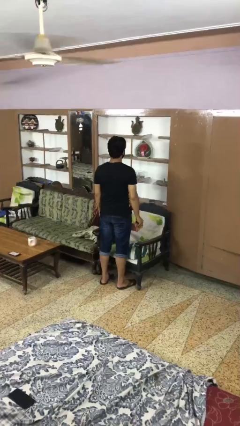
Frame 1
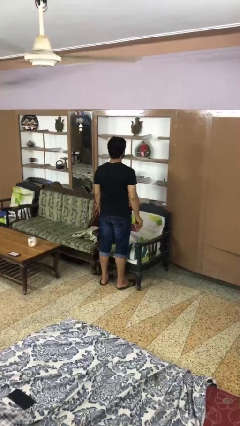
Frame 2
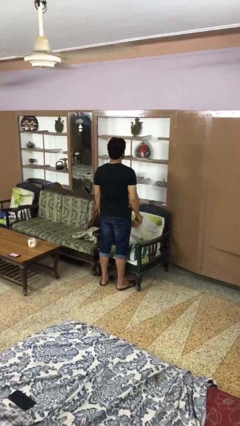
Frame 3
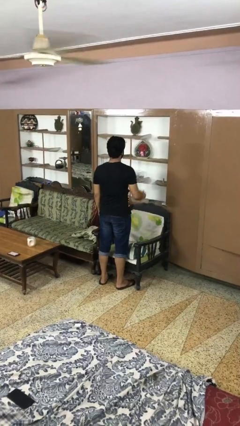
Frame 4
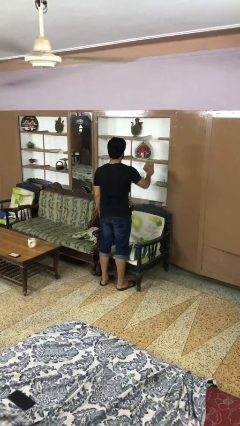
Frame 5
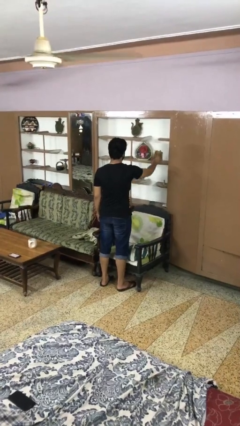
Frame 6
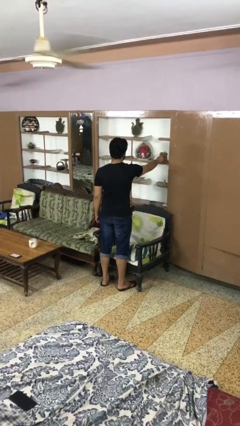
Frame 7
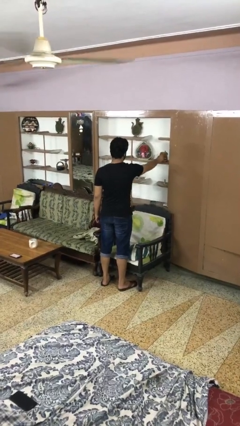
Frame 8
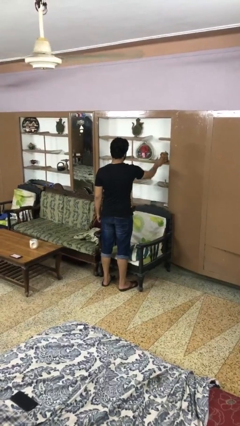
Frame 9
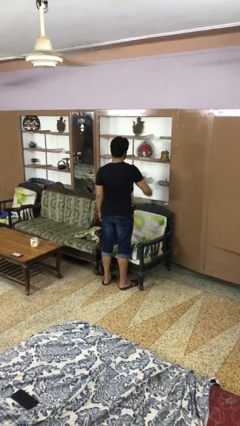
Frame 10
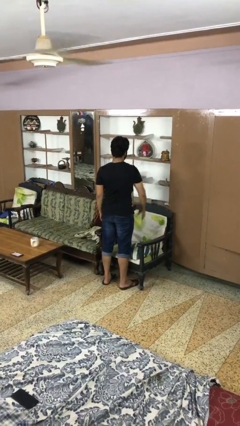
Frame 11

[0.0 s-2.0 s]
person puts down object on shelf

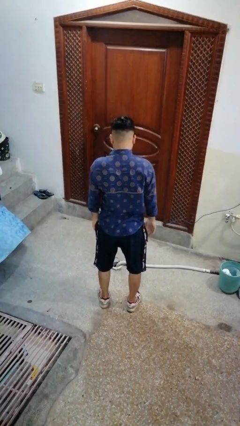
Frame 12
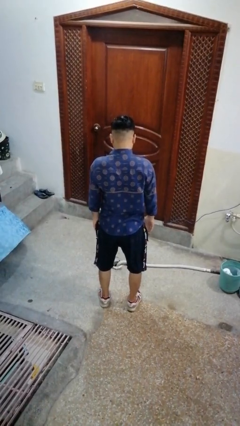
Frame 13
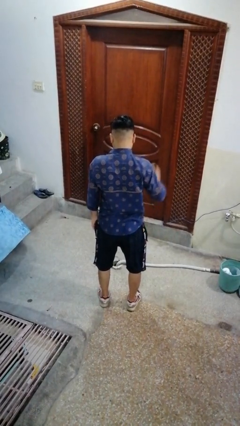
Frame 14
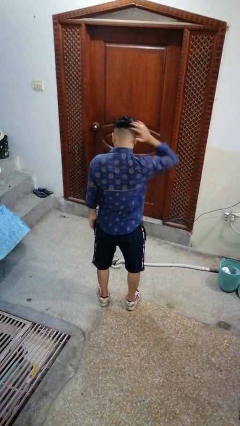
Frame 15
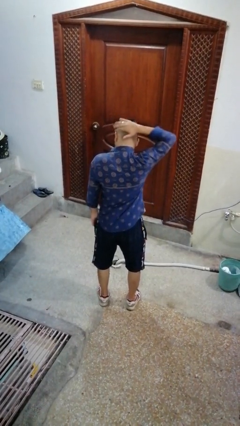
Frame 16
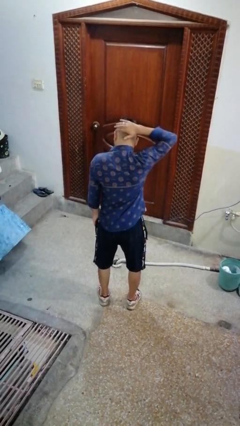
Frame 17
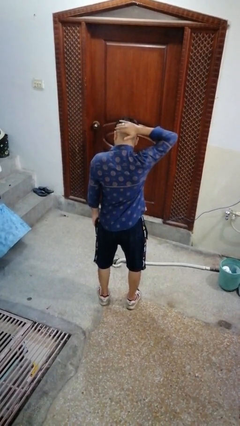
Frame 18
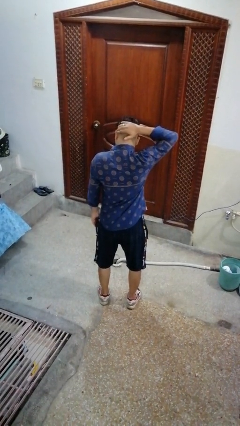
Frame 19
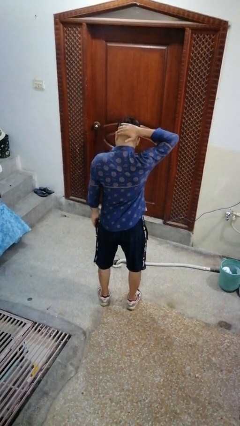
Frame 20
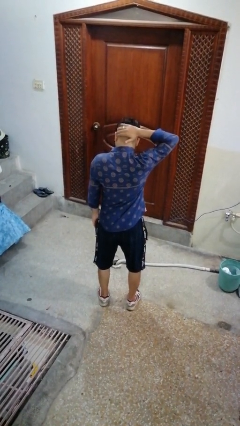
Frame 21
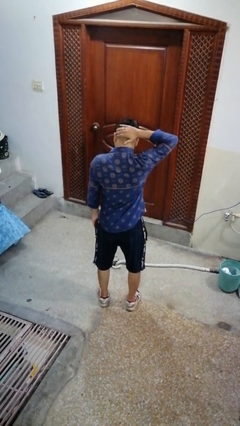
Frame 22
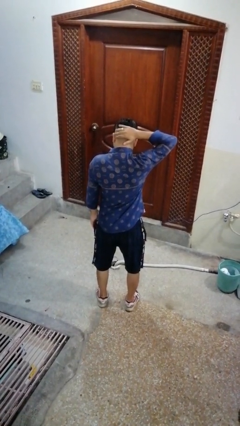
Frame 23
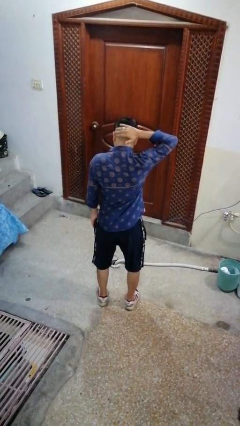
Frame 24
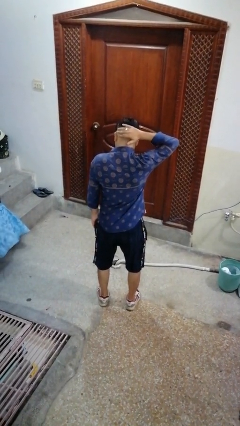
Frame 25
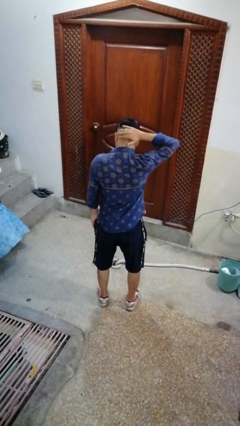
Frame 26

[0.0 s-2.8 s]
person pats head

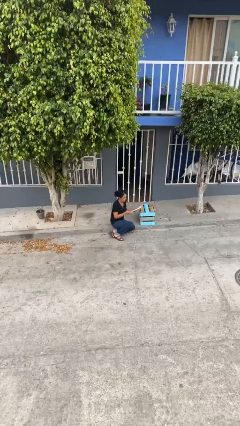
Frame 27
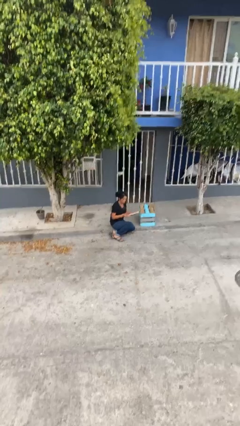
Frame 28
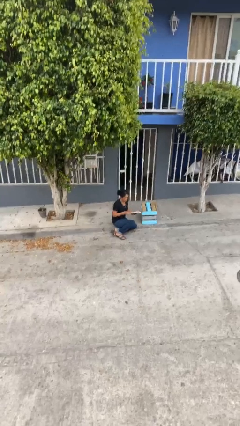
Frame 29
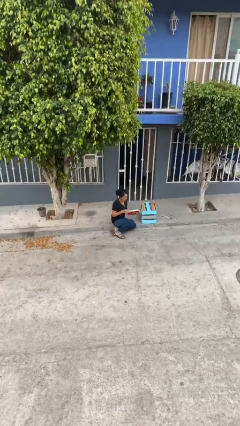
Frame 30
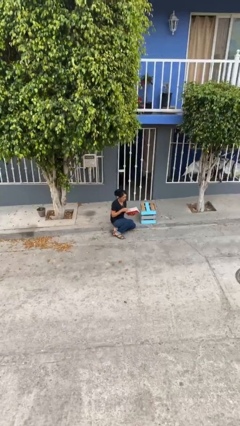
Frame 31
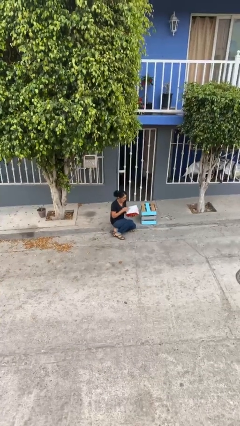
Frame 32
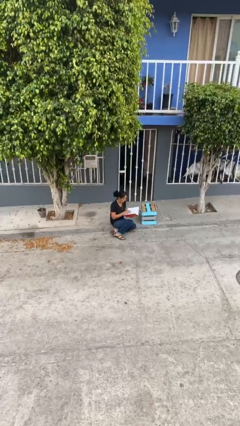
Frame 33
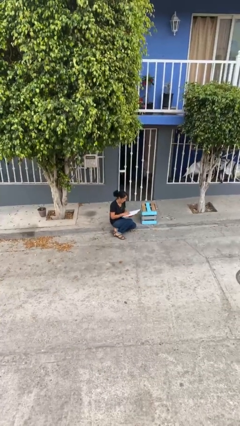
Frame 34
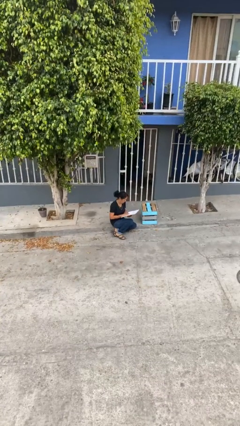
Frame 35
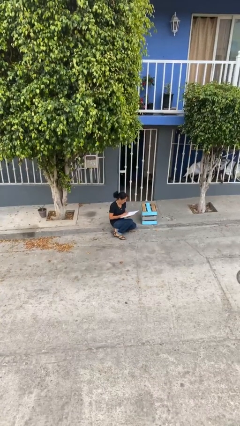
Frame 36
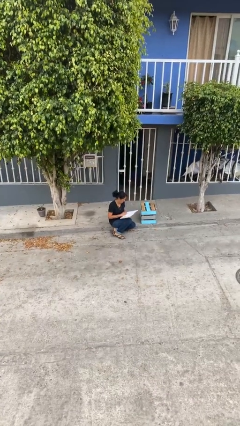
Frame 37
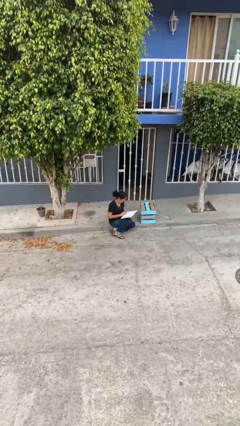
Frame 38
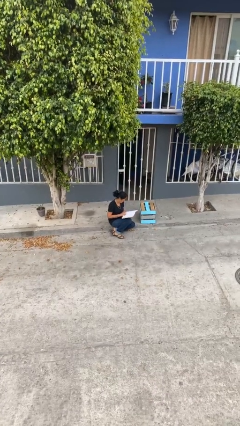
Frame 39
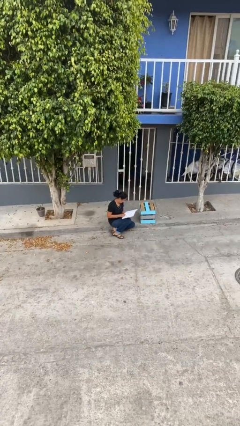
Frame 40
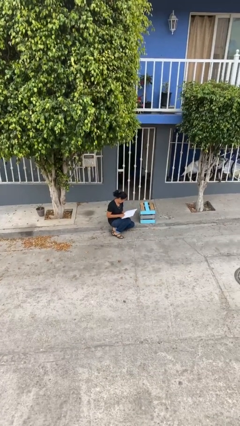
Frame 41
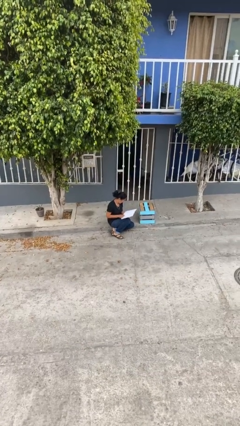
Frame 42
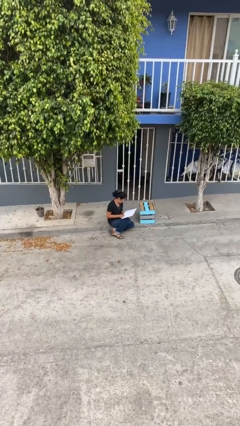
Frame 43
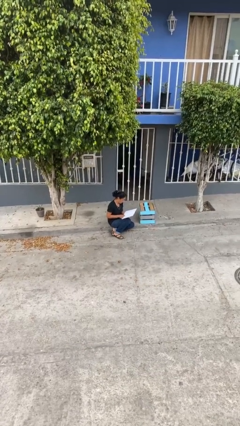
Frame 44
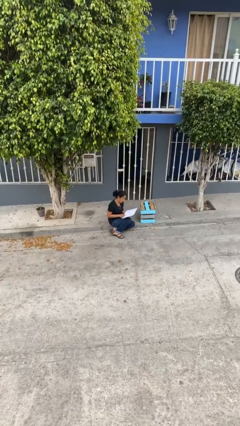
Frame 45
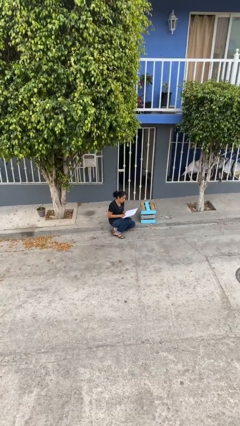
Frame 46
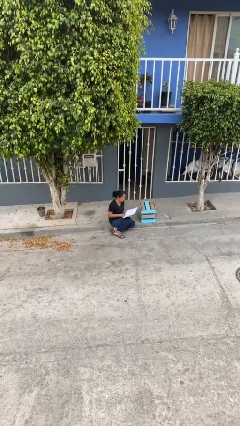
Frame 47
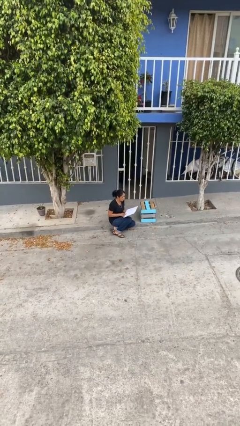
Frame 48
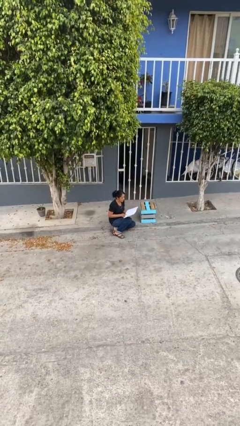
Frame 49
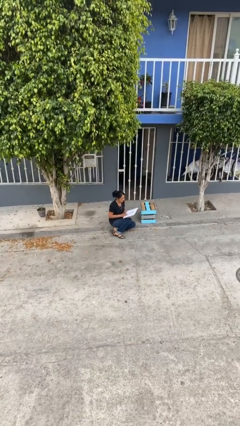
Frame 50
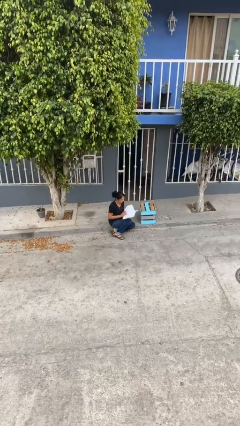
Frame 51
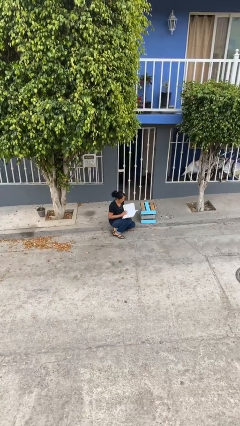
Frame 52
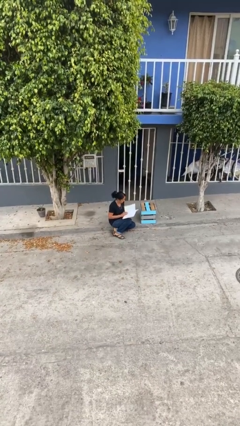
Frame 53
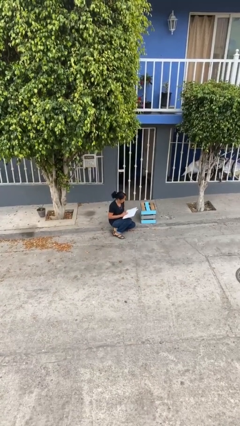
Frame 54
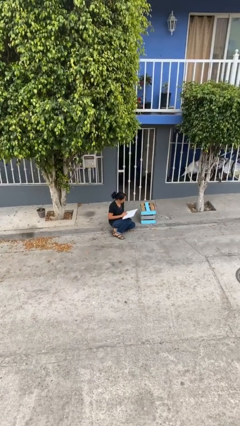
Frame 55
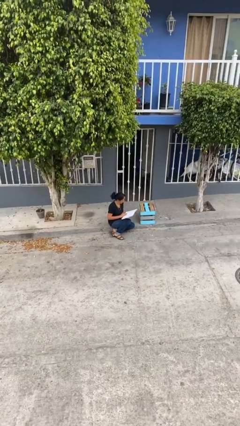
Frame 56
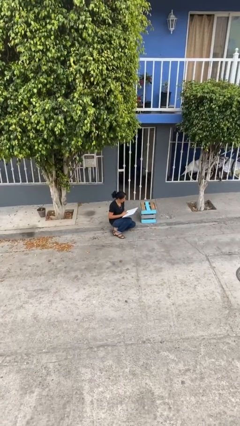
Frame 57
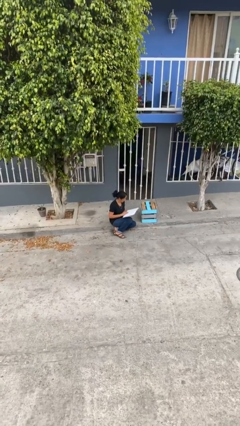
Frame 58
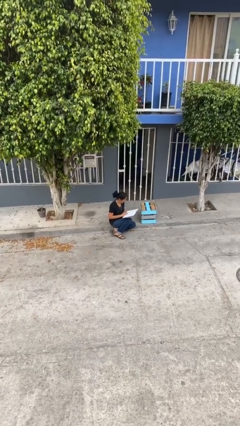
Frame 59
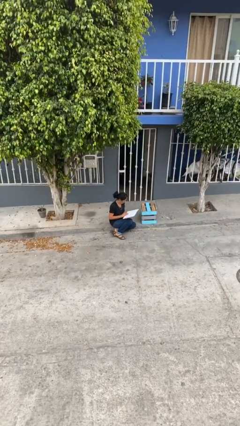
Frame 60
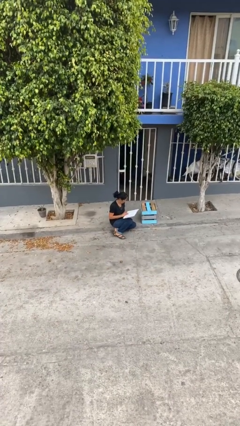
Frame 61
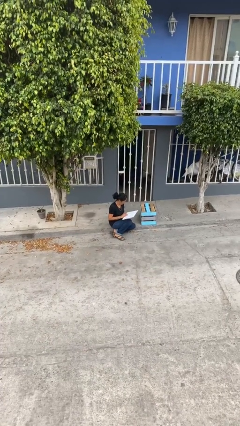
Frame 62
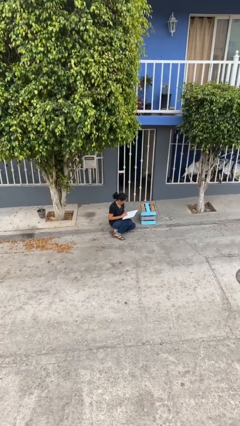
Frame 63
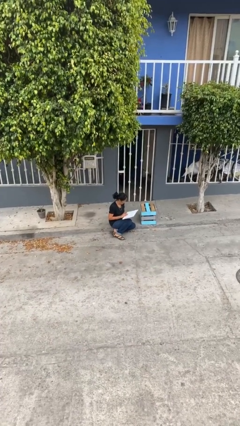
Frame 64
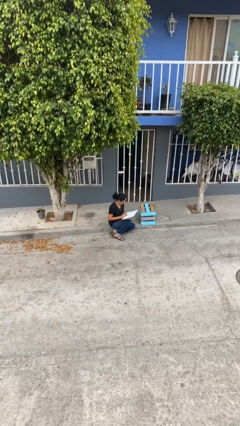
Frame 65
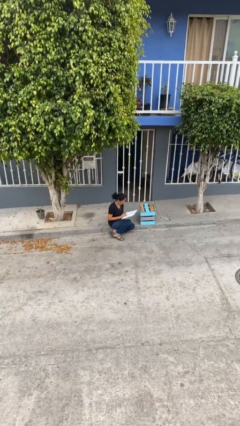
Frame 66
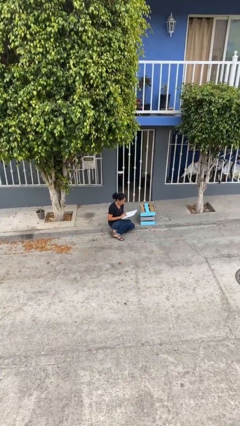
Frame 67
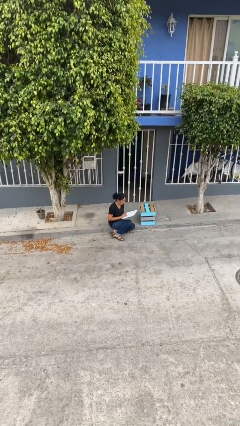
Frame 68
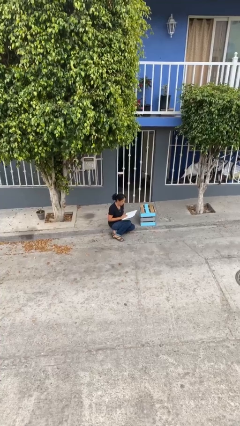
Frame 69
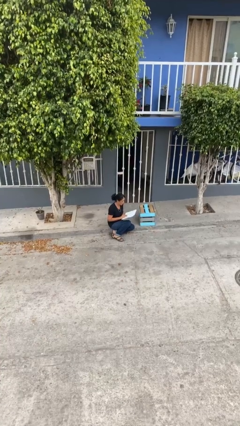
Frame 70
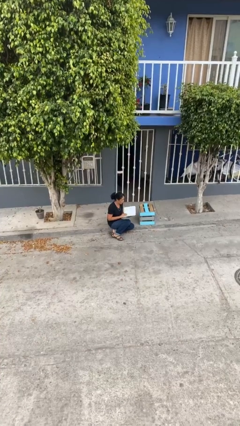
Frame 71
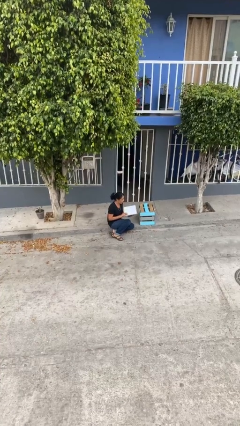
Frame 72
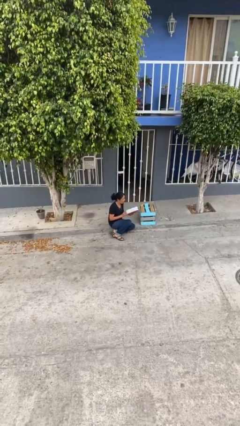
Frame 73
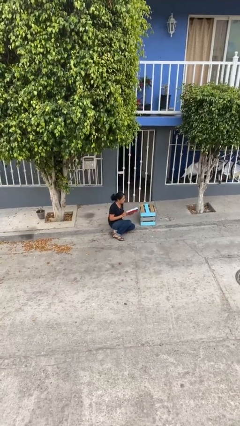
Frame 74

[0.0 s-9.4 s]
person reads document

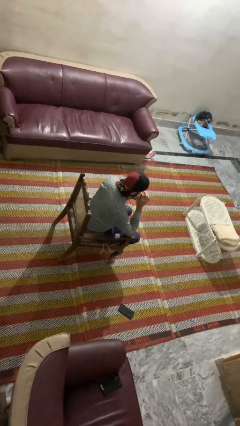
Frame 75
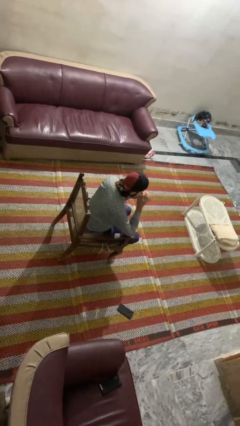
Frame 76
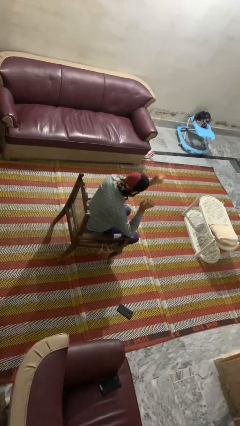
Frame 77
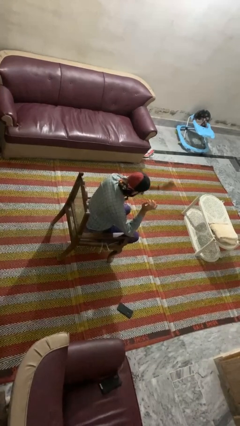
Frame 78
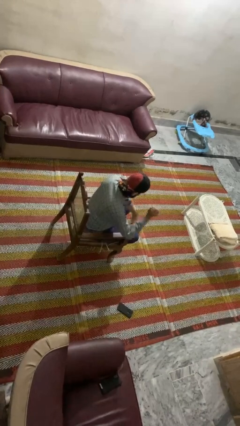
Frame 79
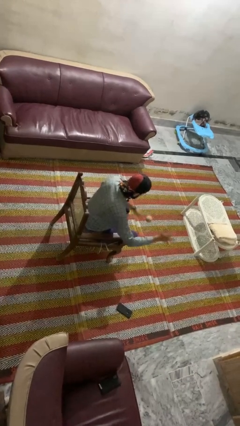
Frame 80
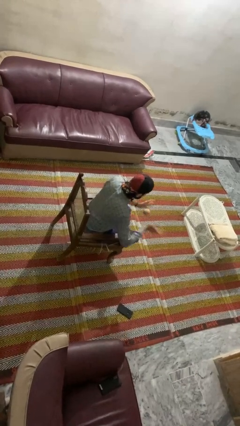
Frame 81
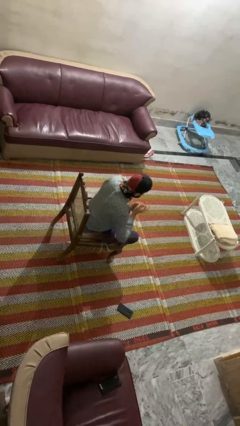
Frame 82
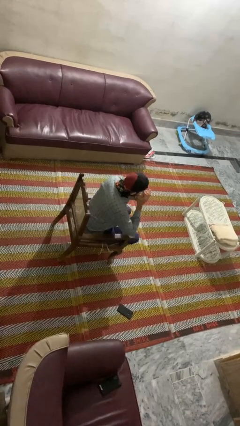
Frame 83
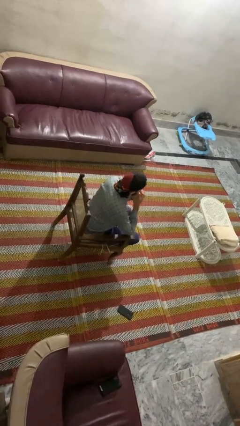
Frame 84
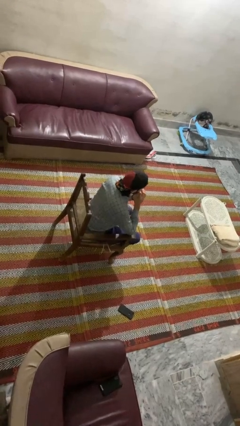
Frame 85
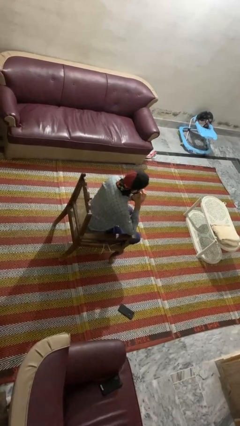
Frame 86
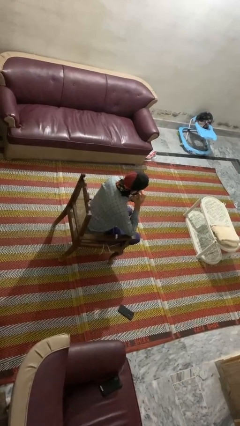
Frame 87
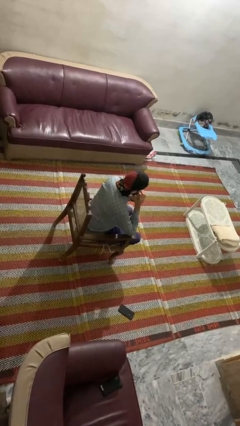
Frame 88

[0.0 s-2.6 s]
person bounces ball on floor

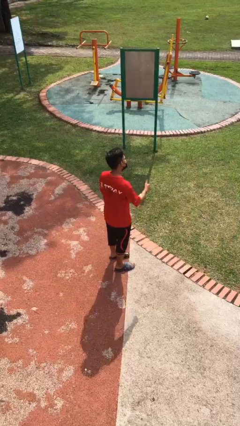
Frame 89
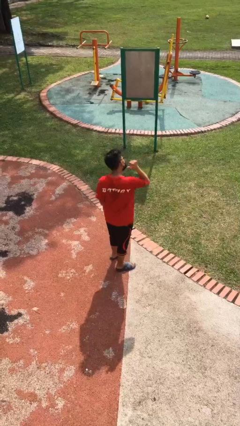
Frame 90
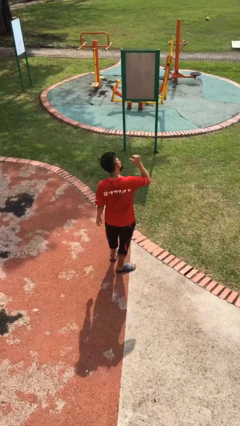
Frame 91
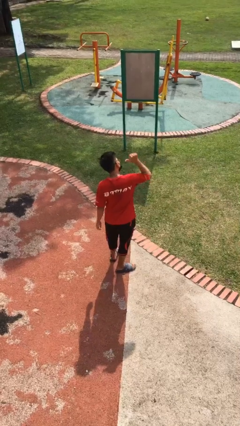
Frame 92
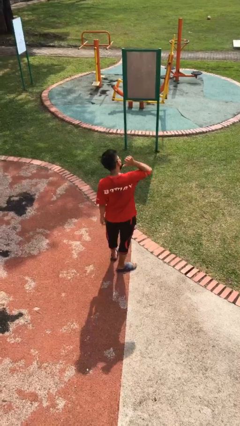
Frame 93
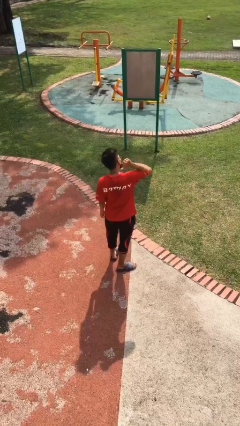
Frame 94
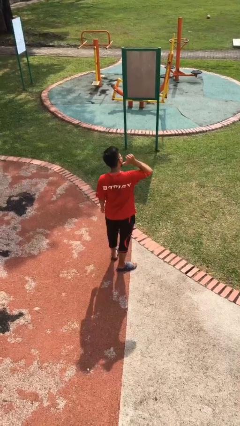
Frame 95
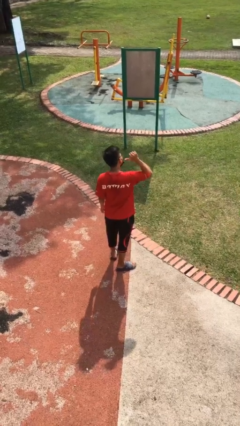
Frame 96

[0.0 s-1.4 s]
person gestures behind me
